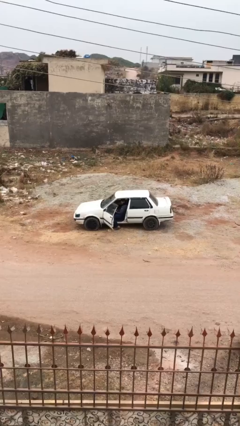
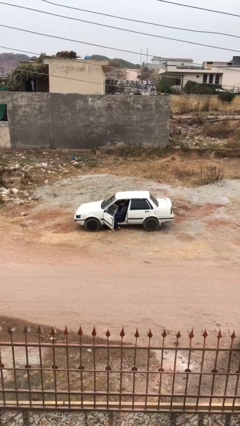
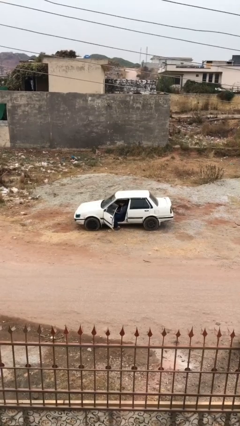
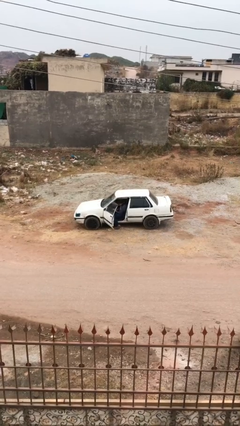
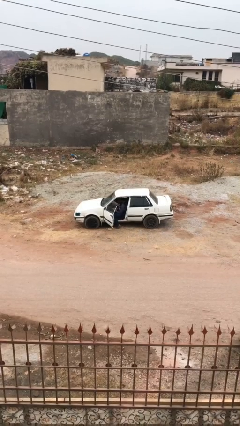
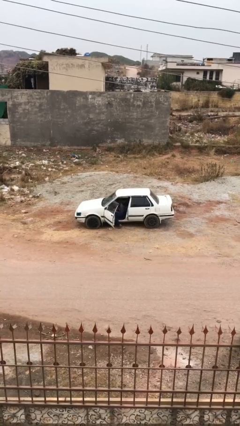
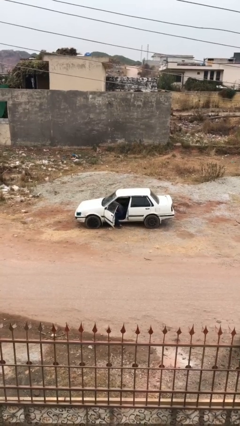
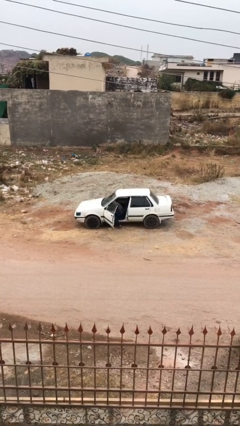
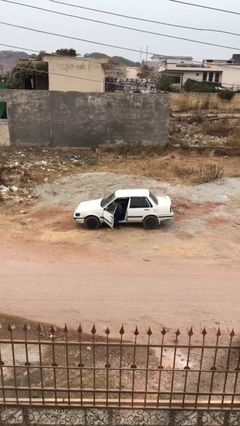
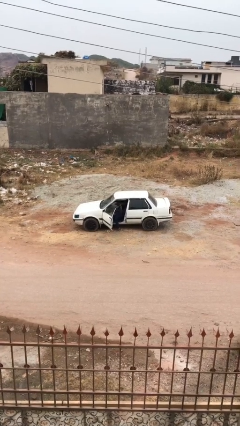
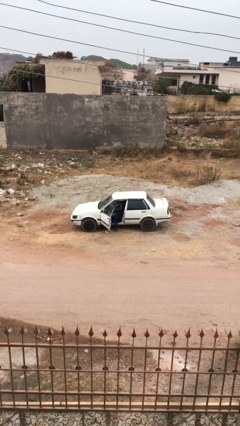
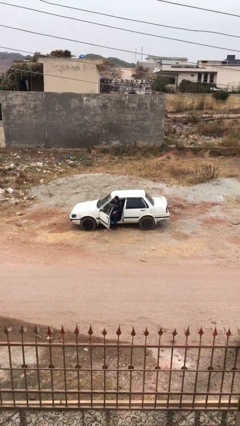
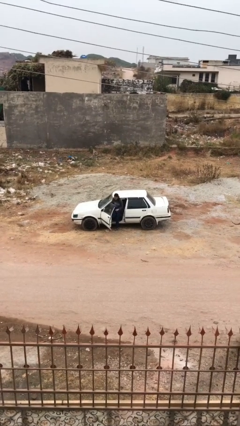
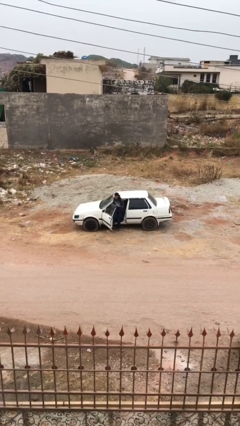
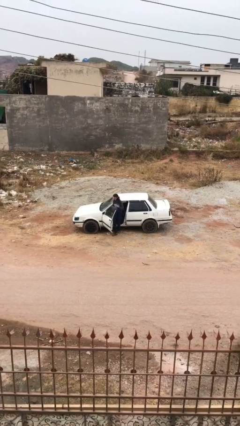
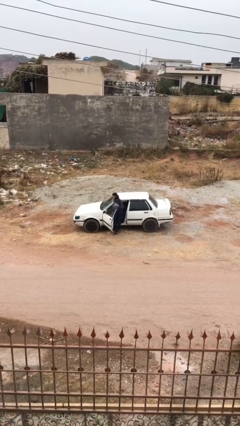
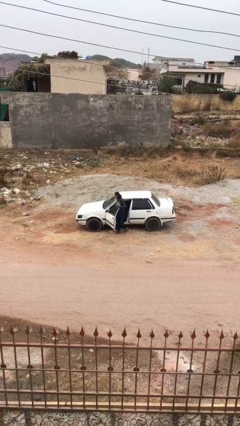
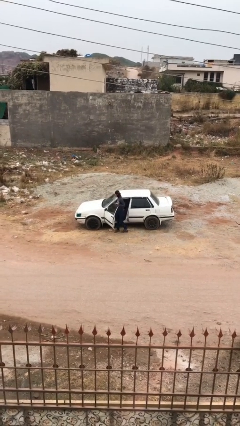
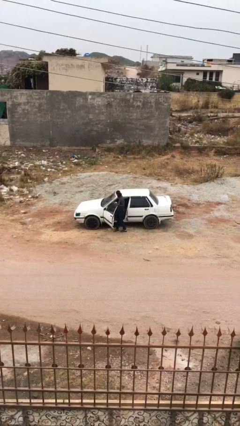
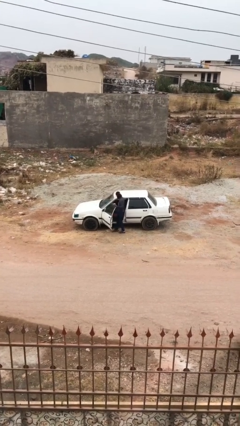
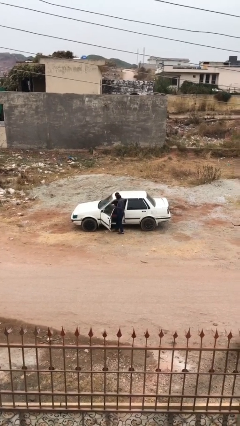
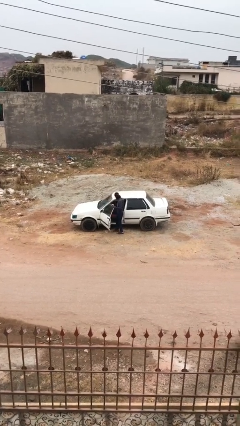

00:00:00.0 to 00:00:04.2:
person exits car

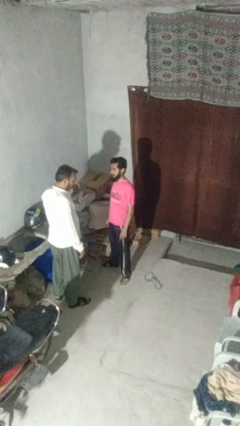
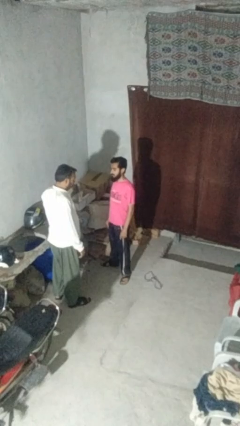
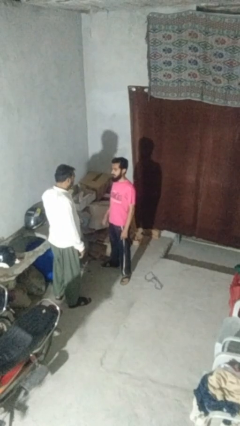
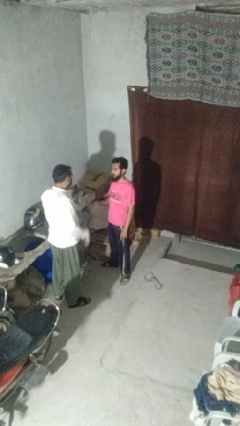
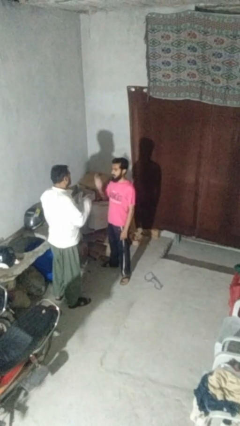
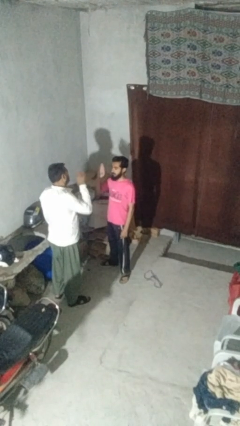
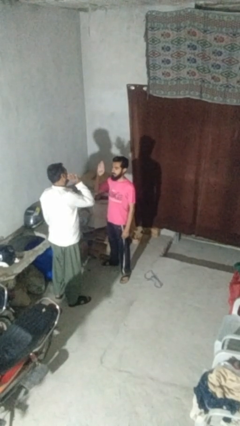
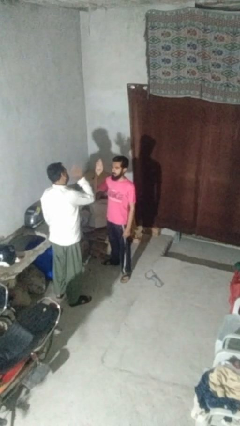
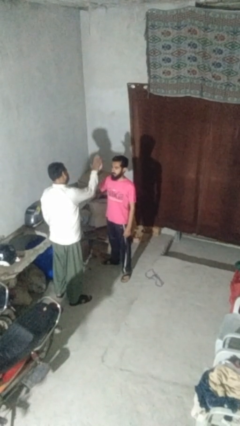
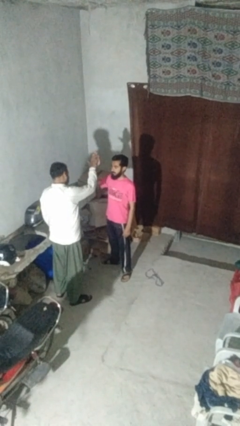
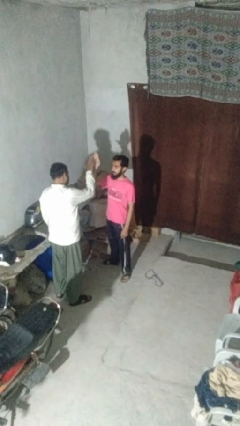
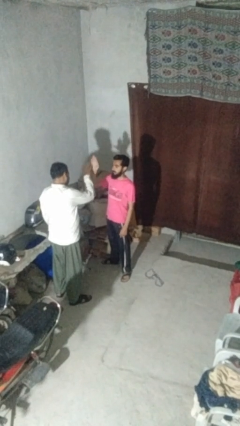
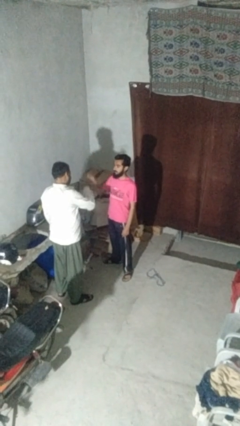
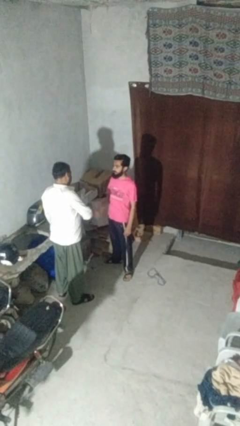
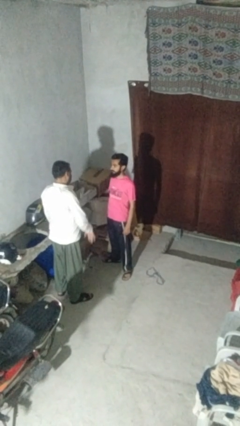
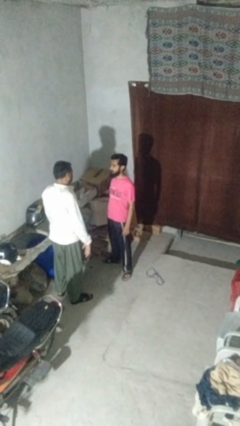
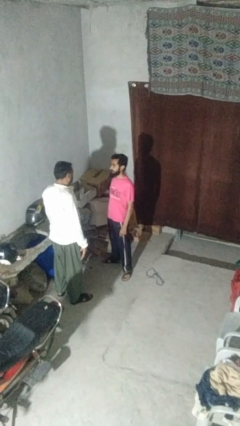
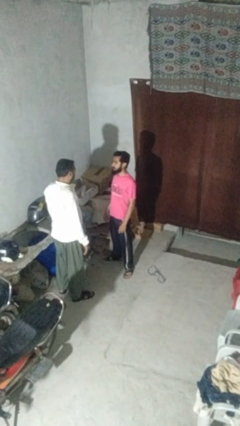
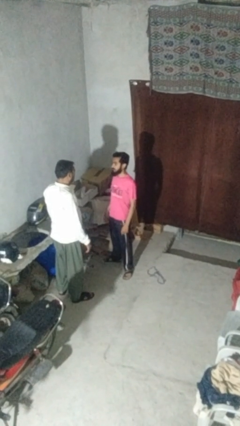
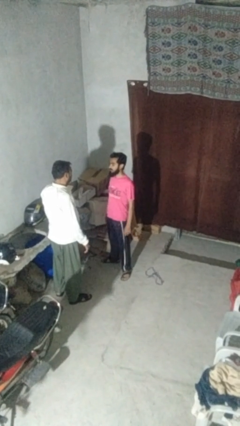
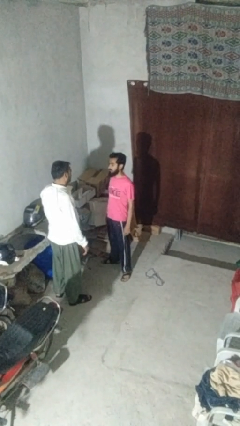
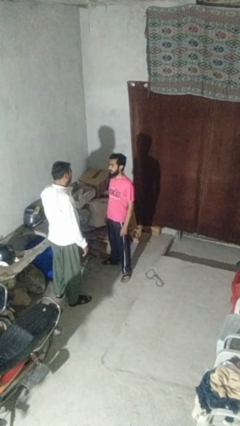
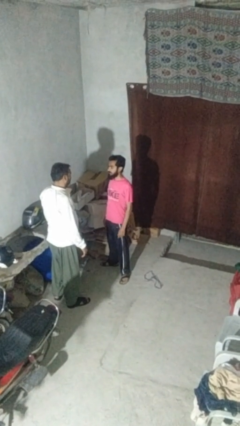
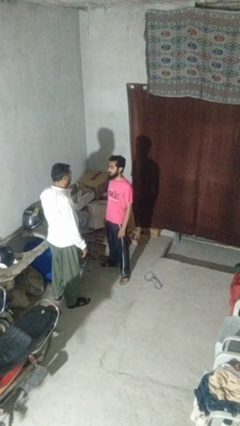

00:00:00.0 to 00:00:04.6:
person highfives hand

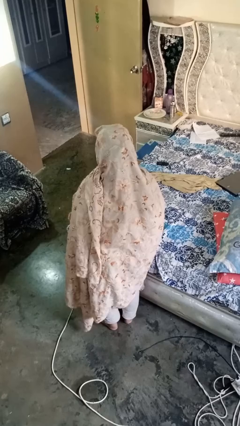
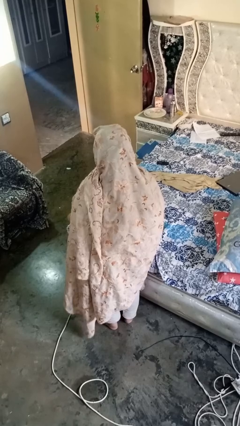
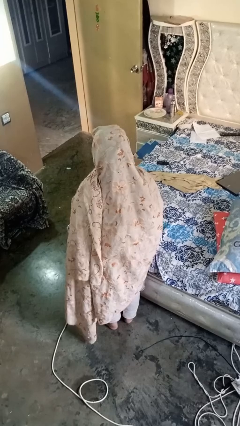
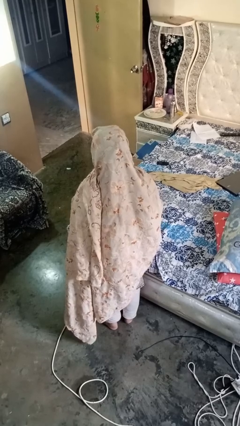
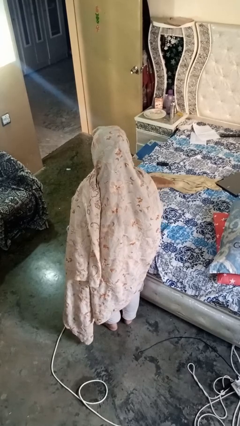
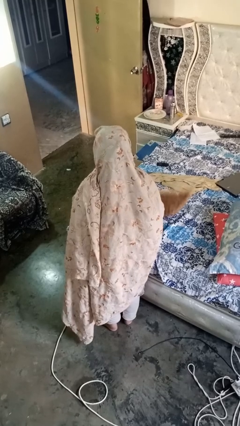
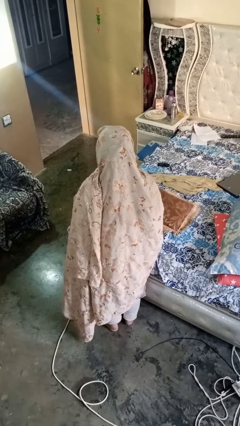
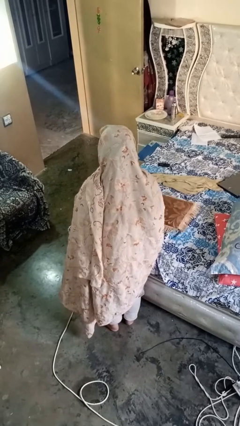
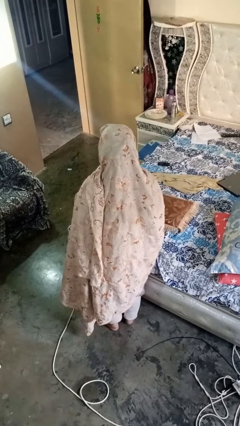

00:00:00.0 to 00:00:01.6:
person puts down object on bed

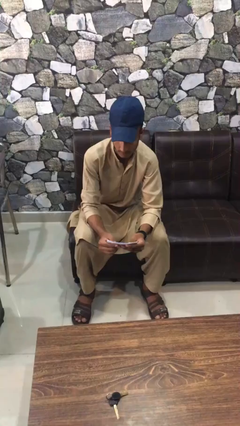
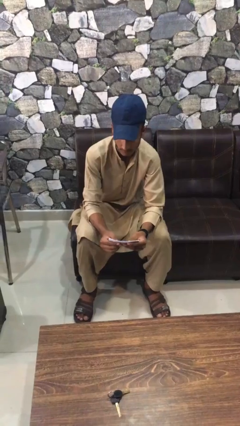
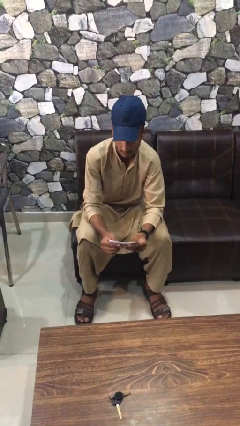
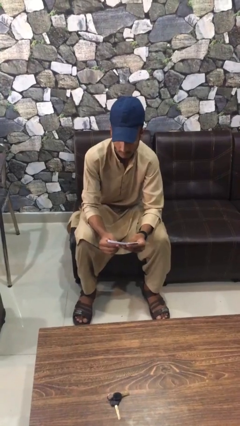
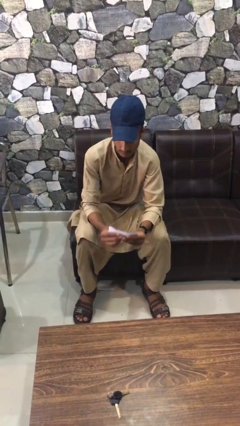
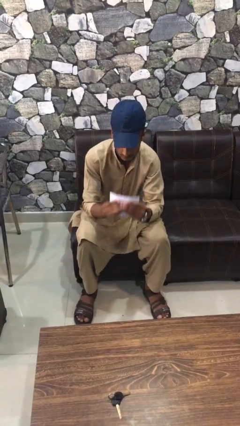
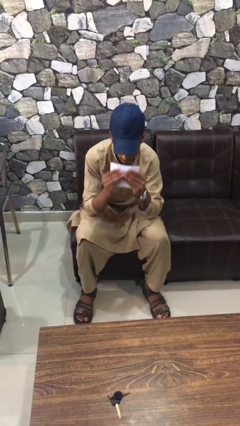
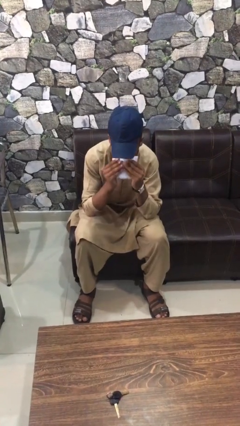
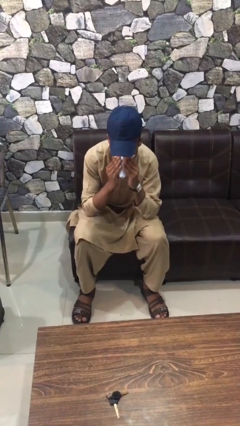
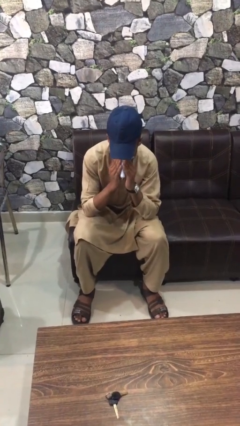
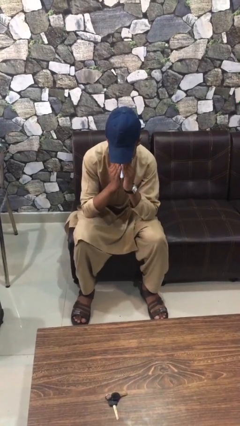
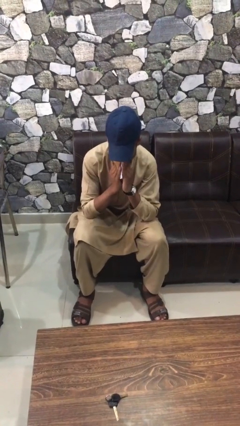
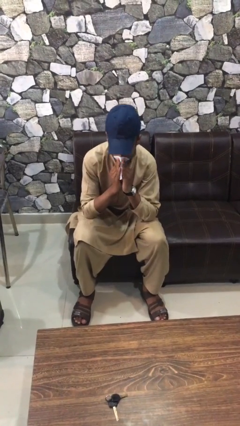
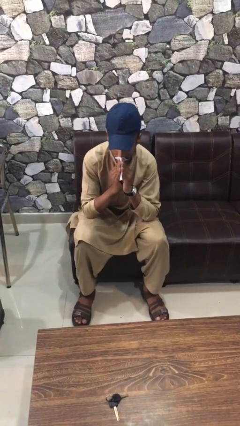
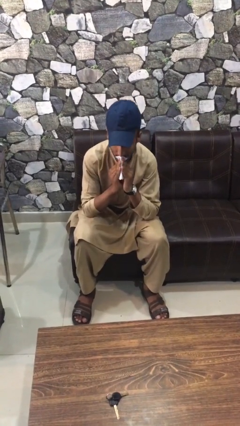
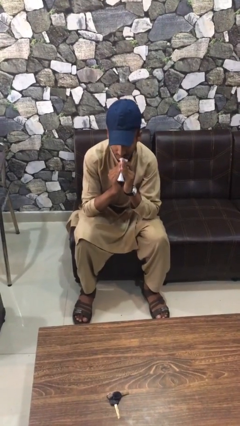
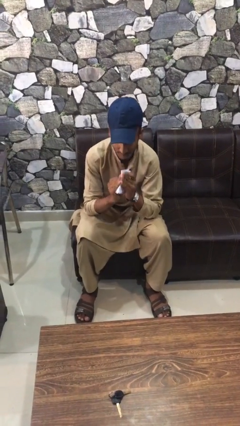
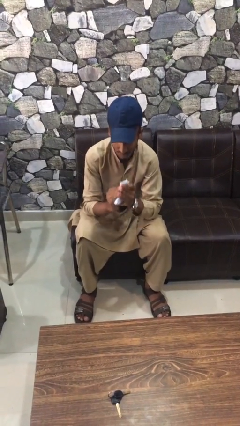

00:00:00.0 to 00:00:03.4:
person blows nose

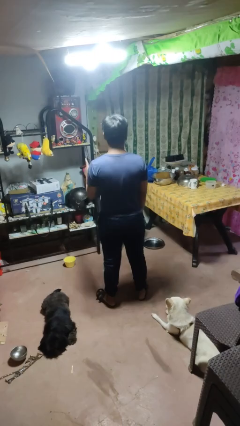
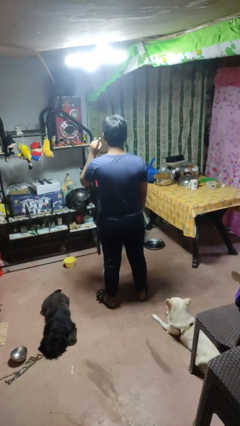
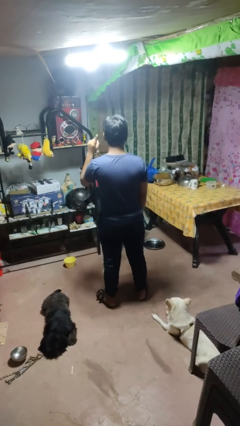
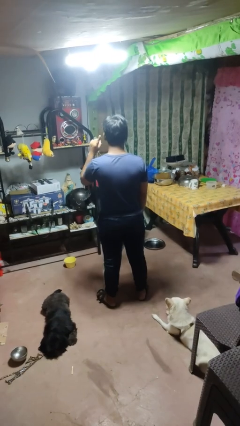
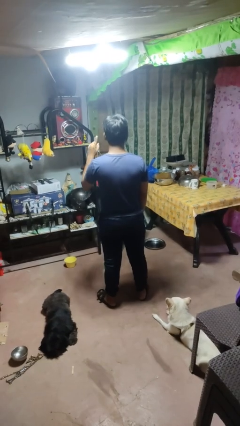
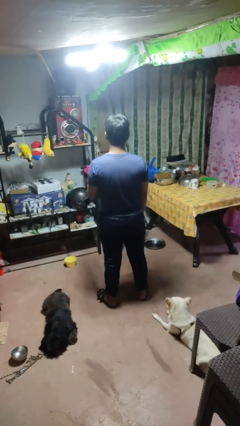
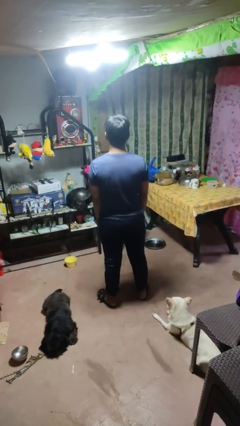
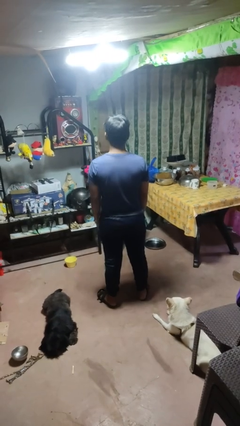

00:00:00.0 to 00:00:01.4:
person gestures listen closely

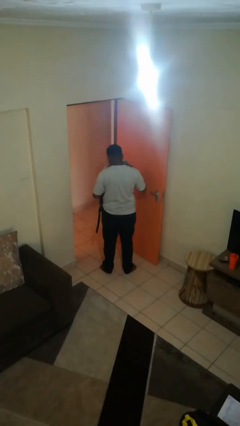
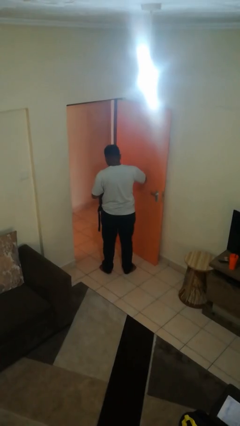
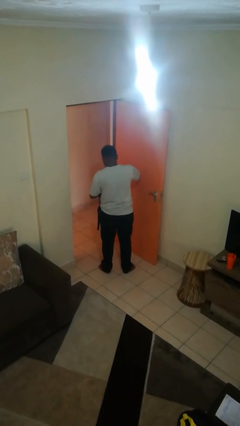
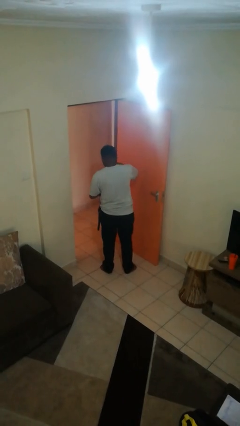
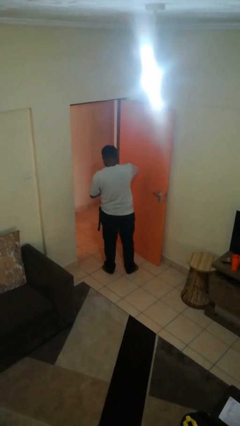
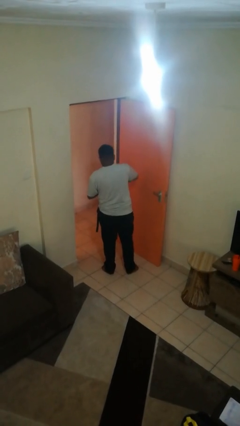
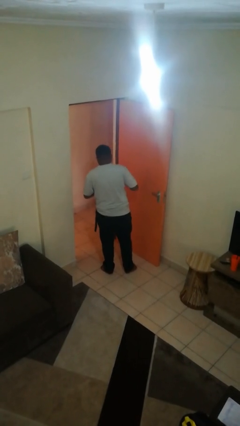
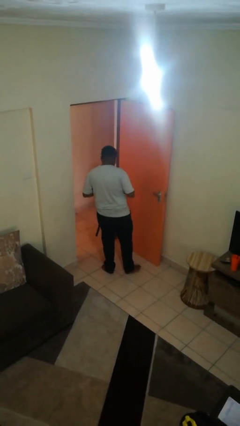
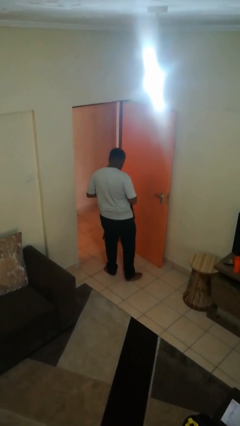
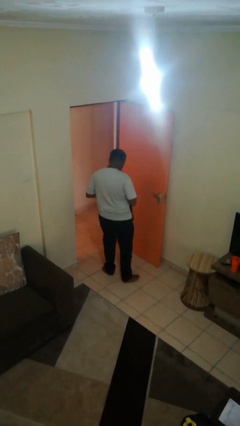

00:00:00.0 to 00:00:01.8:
person puts object into backpack

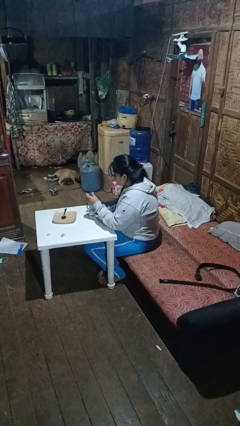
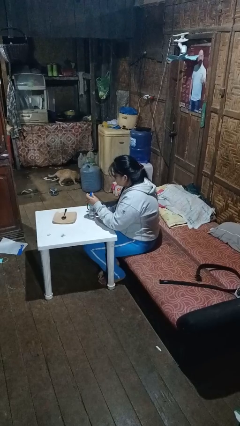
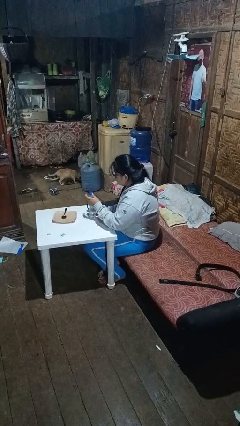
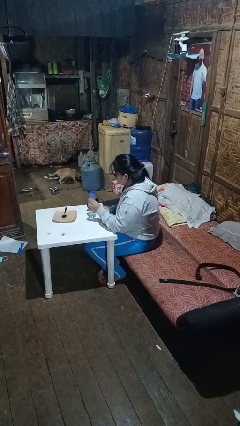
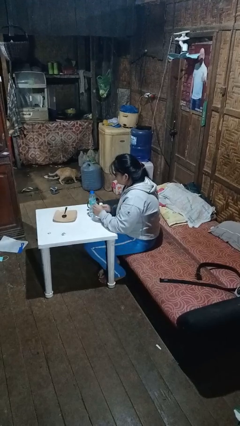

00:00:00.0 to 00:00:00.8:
person screws lid to bottle
